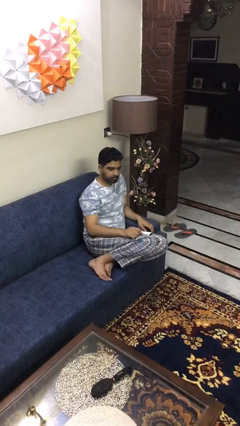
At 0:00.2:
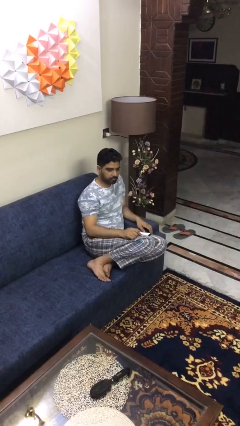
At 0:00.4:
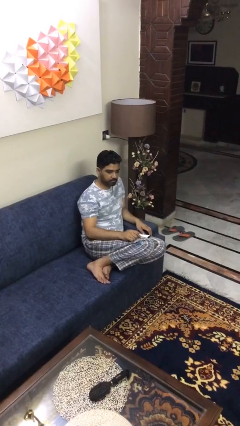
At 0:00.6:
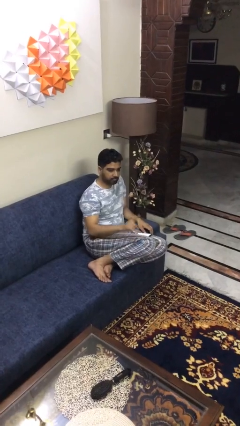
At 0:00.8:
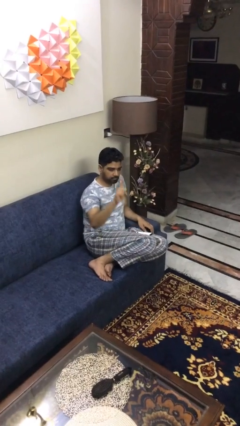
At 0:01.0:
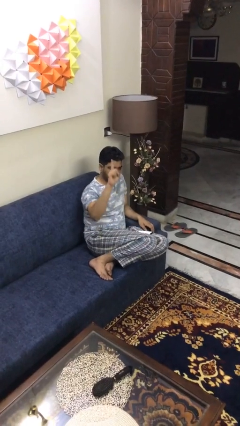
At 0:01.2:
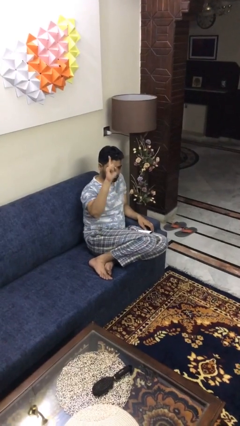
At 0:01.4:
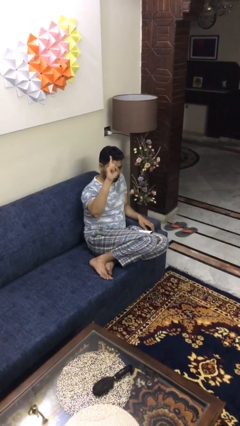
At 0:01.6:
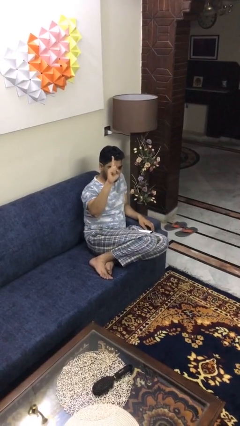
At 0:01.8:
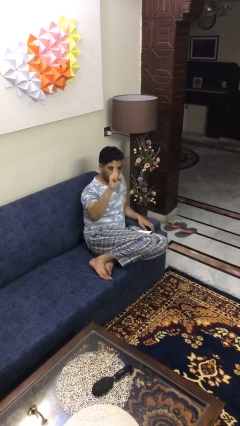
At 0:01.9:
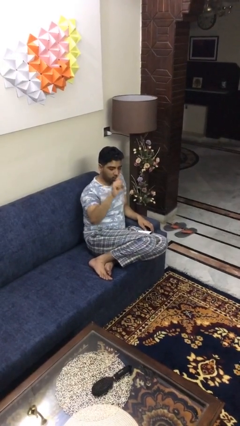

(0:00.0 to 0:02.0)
person gestures number one

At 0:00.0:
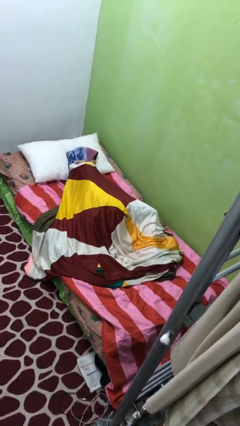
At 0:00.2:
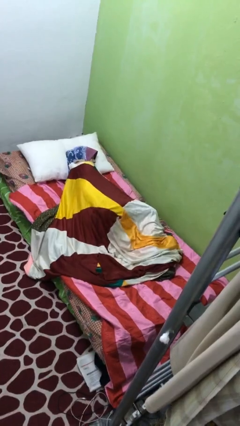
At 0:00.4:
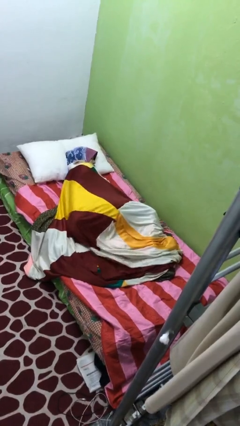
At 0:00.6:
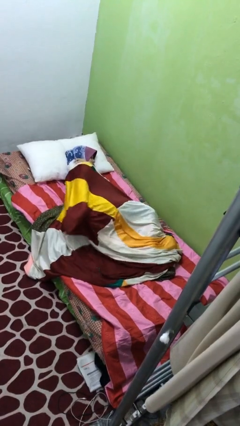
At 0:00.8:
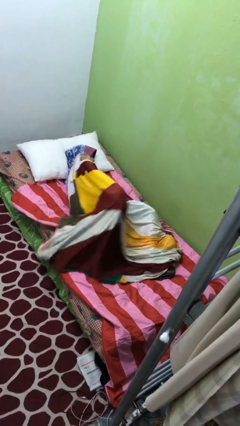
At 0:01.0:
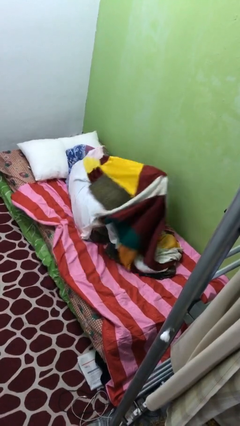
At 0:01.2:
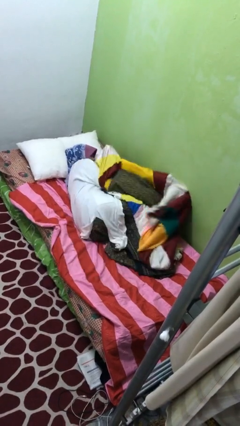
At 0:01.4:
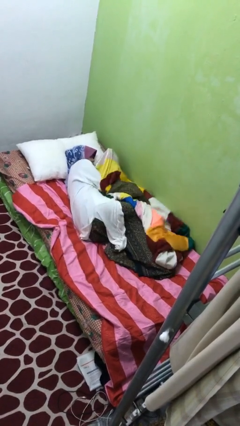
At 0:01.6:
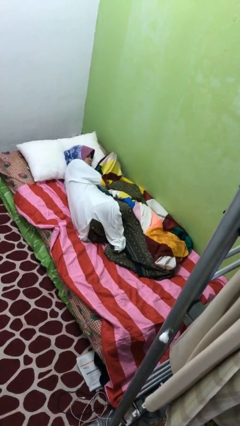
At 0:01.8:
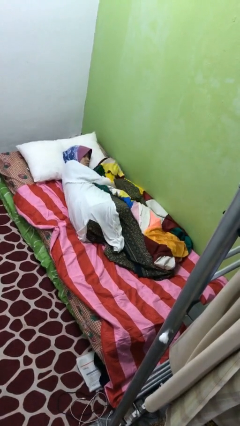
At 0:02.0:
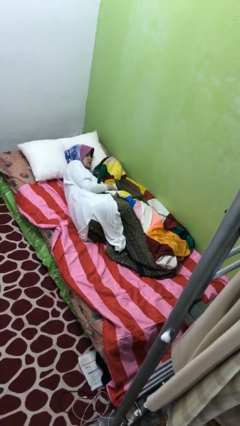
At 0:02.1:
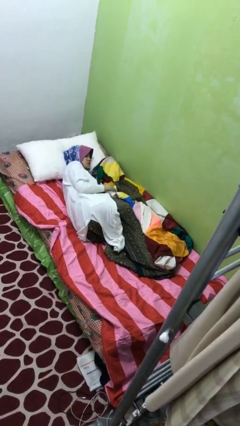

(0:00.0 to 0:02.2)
person uncovers with blanket

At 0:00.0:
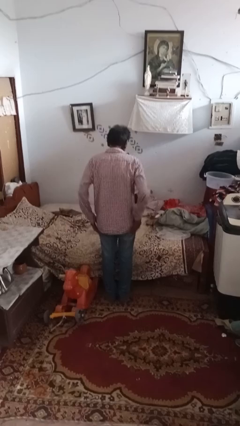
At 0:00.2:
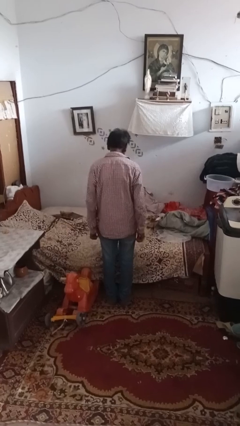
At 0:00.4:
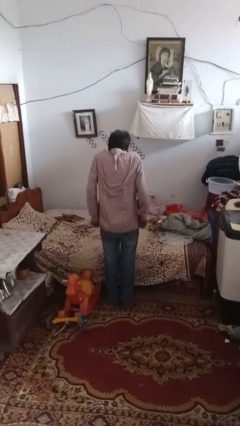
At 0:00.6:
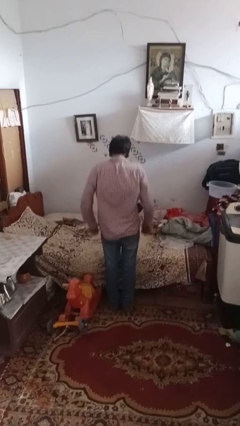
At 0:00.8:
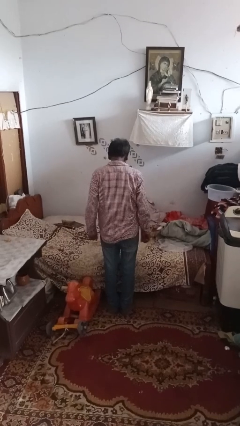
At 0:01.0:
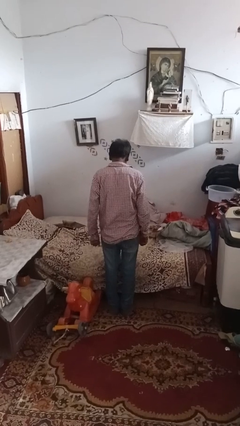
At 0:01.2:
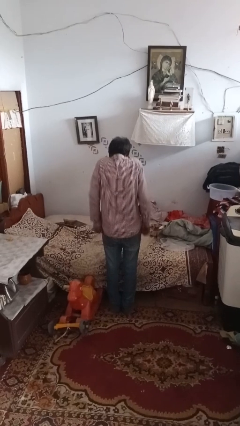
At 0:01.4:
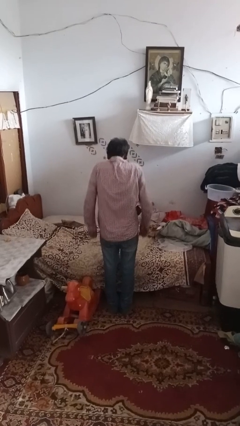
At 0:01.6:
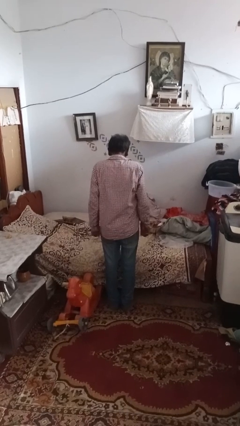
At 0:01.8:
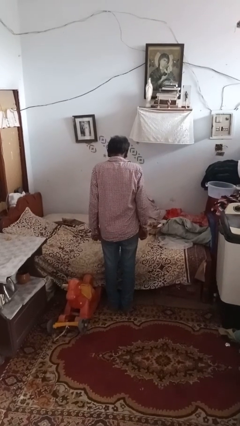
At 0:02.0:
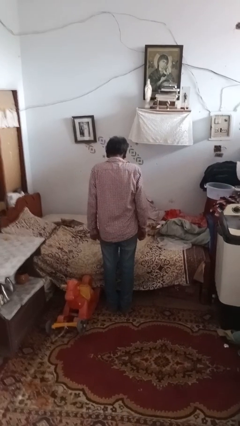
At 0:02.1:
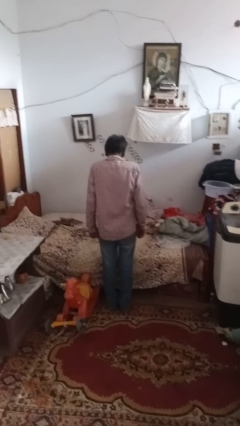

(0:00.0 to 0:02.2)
person shrugs

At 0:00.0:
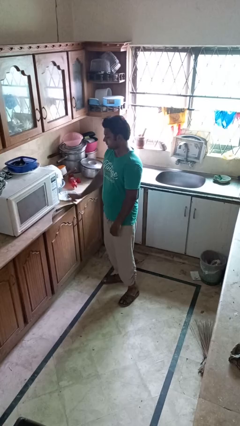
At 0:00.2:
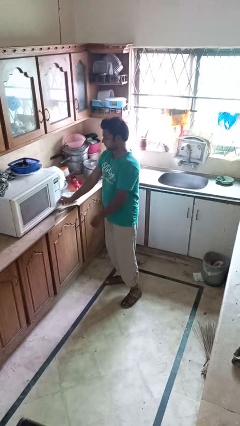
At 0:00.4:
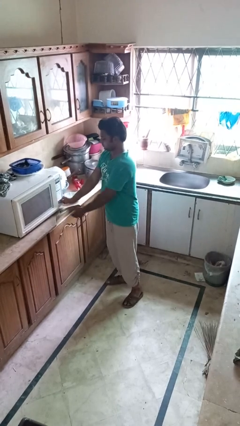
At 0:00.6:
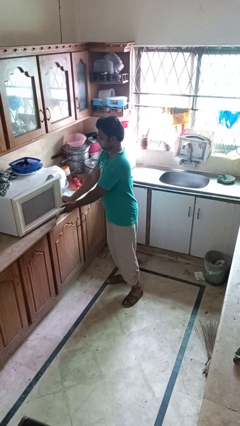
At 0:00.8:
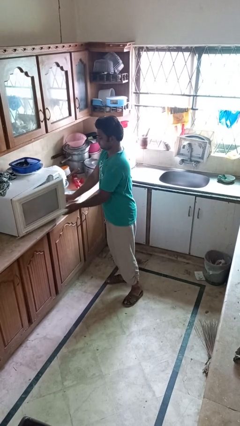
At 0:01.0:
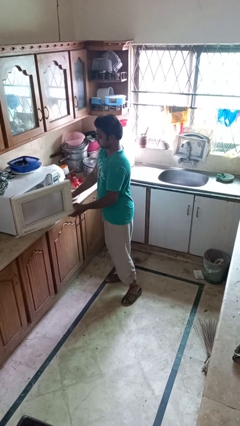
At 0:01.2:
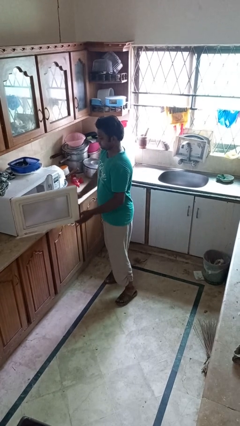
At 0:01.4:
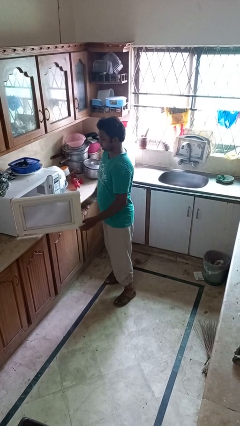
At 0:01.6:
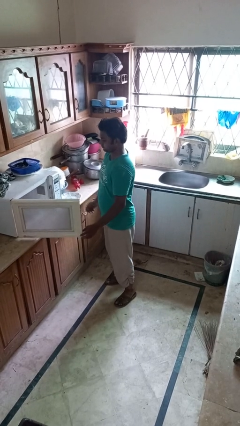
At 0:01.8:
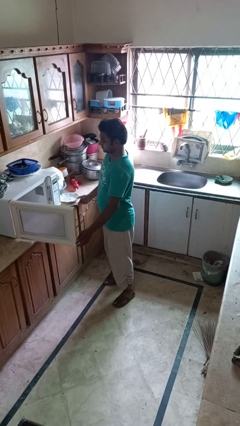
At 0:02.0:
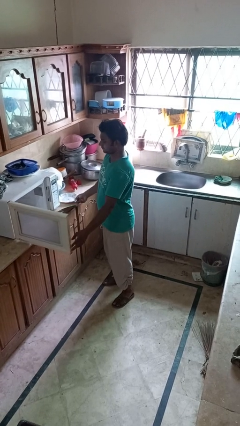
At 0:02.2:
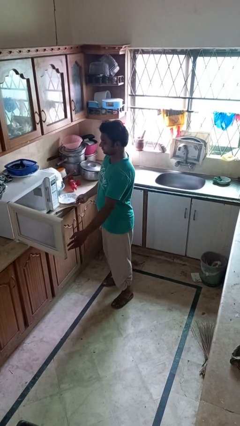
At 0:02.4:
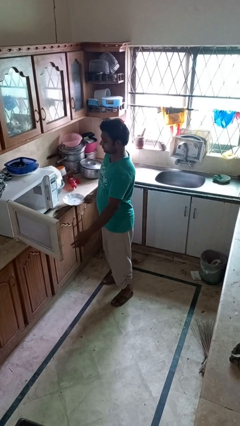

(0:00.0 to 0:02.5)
person opens microwave

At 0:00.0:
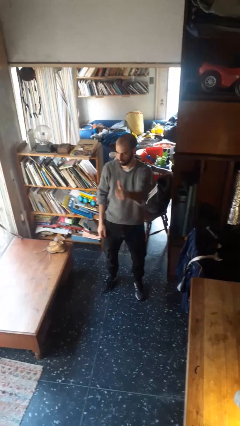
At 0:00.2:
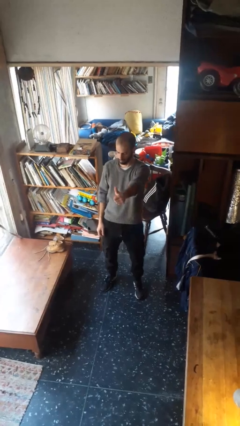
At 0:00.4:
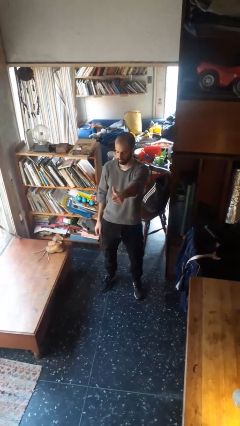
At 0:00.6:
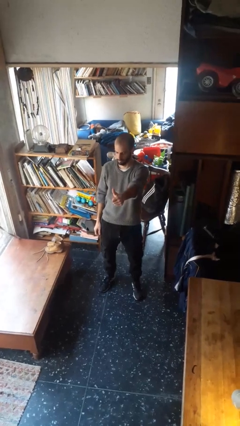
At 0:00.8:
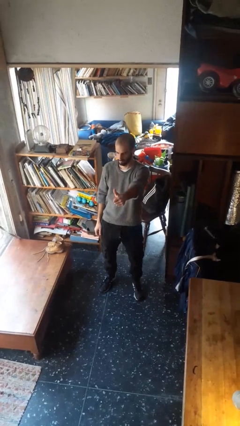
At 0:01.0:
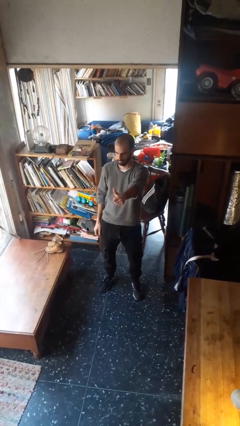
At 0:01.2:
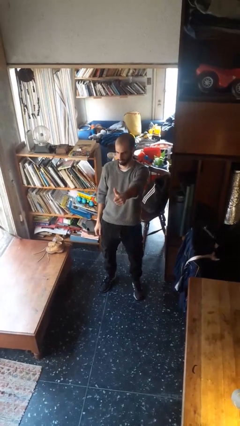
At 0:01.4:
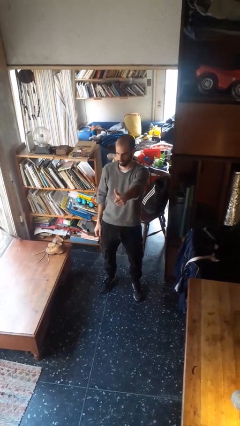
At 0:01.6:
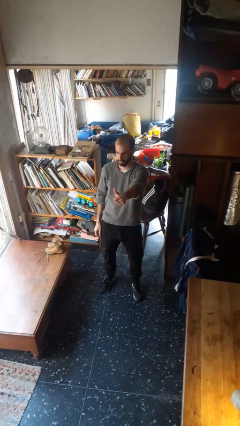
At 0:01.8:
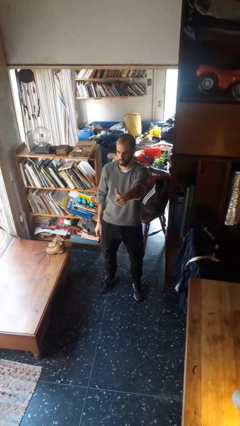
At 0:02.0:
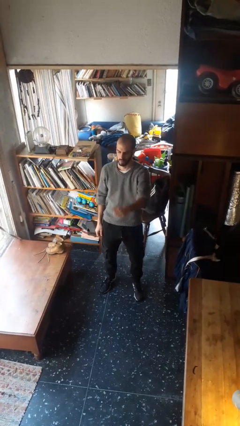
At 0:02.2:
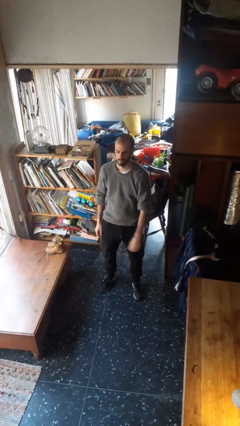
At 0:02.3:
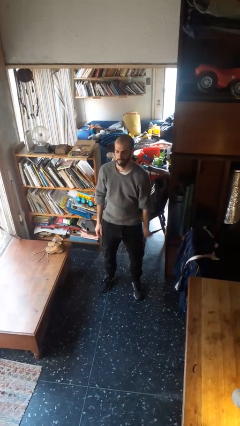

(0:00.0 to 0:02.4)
person gestures thumbs up

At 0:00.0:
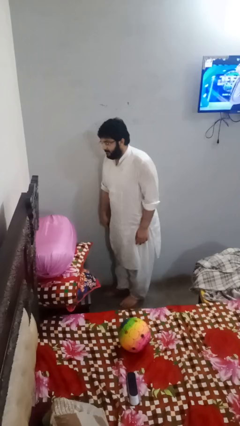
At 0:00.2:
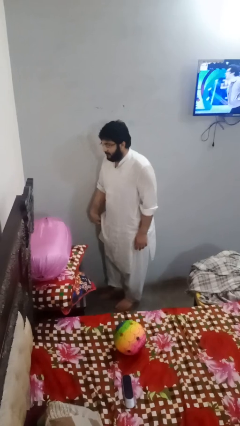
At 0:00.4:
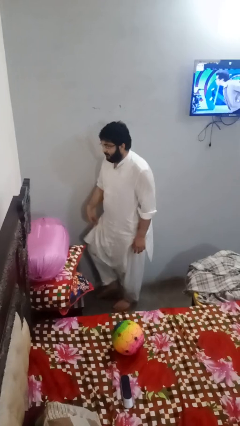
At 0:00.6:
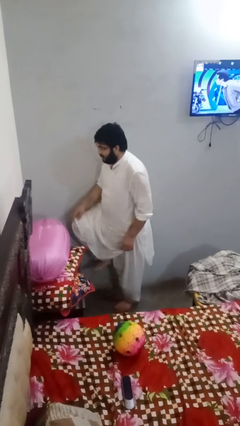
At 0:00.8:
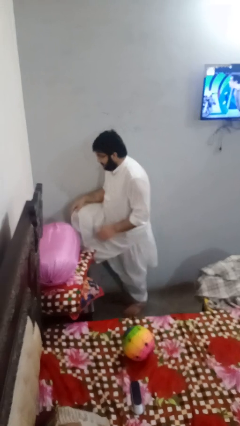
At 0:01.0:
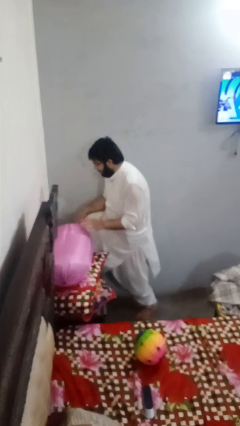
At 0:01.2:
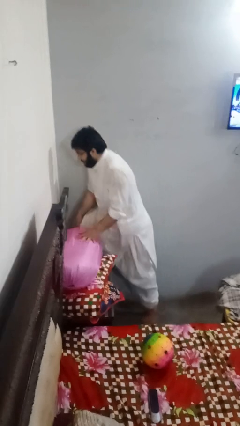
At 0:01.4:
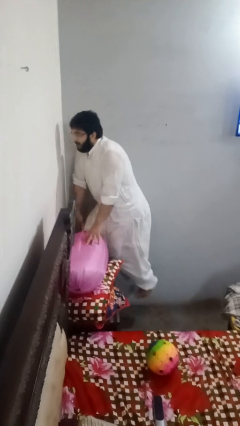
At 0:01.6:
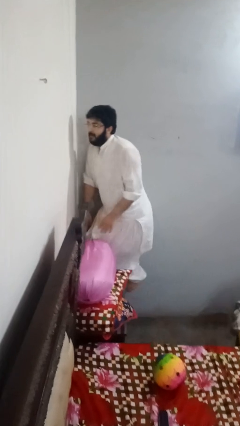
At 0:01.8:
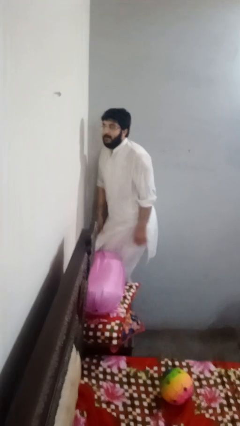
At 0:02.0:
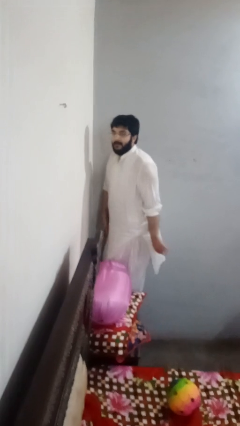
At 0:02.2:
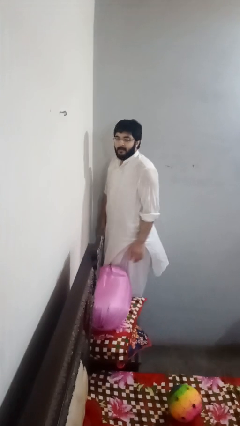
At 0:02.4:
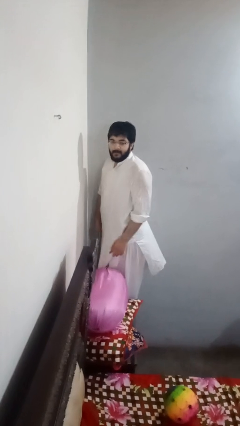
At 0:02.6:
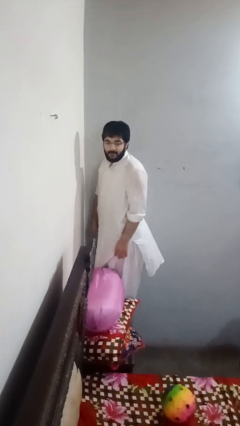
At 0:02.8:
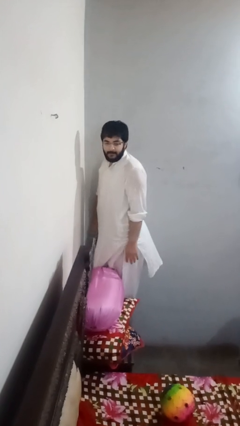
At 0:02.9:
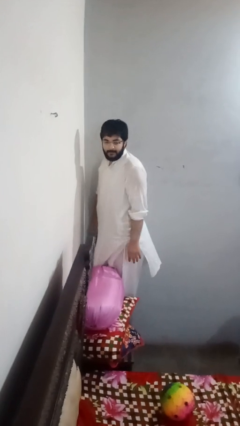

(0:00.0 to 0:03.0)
person climbs on table

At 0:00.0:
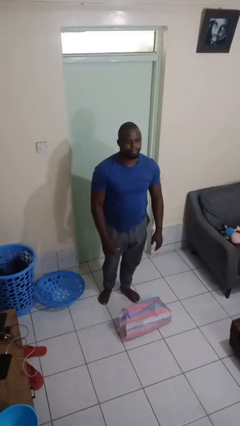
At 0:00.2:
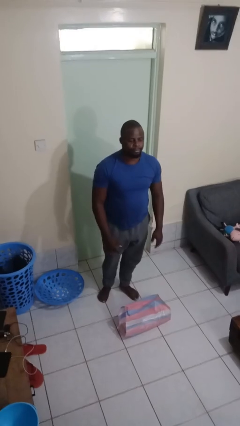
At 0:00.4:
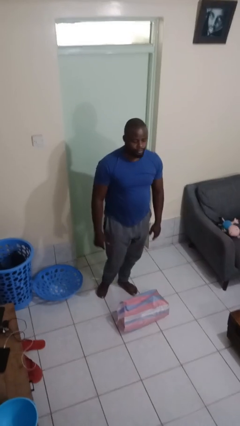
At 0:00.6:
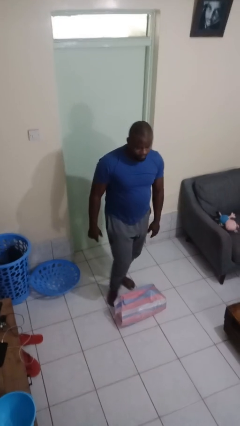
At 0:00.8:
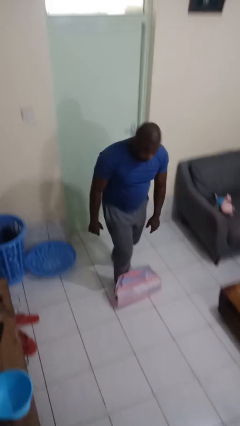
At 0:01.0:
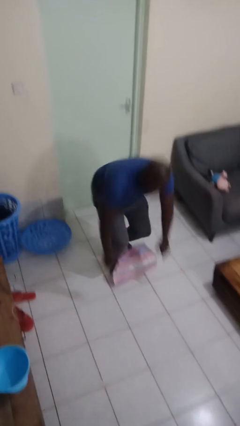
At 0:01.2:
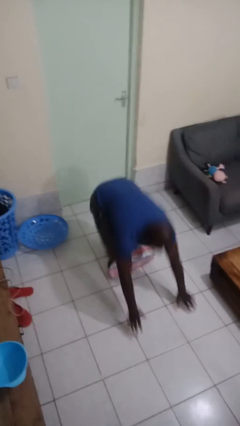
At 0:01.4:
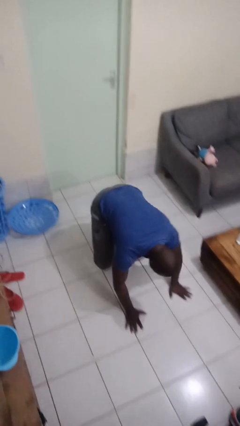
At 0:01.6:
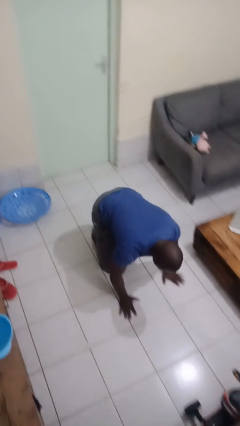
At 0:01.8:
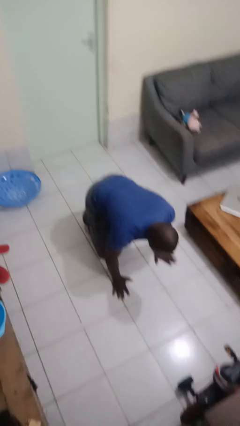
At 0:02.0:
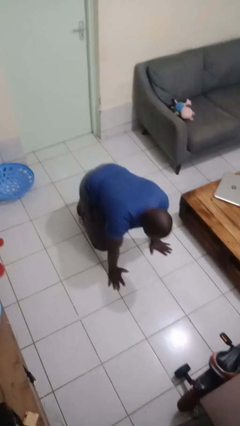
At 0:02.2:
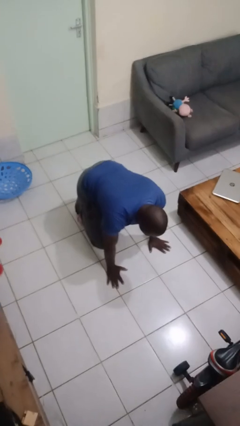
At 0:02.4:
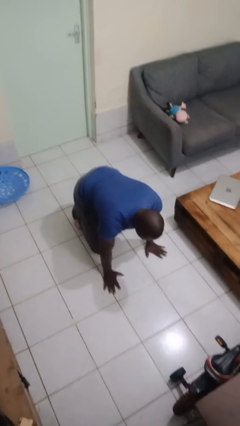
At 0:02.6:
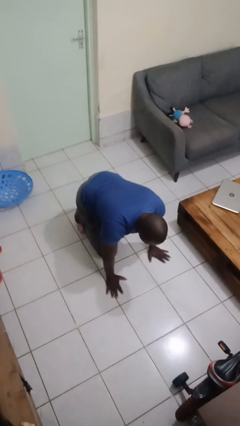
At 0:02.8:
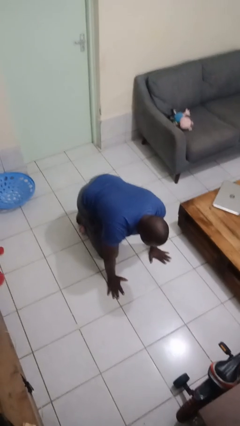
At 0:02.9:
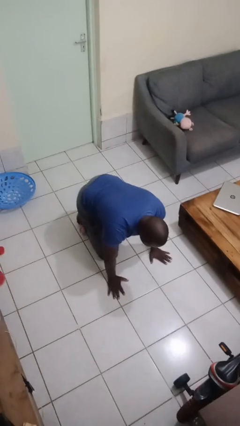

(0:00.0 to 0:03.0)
person trips on object on floor

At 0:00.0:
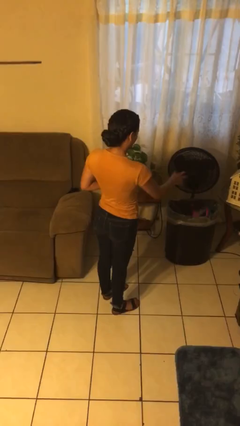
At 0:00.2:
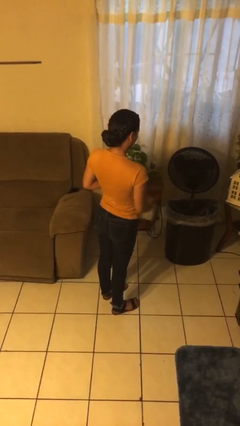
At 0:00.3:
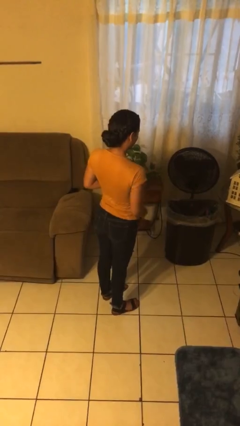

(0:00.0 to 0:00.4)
person discards trash
